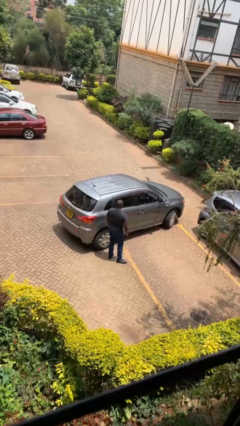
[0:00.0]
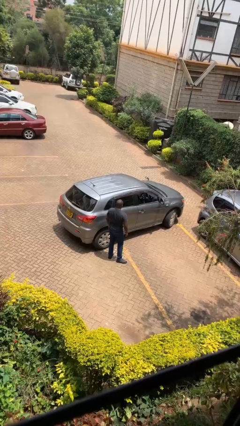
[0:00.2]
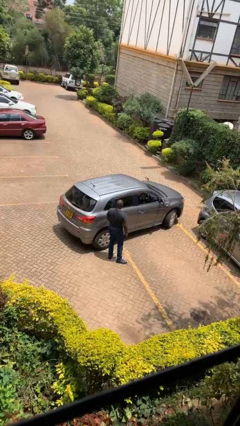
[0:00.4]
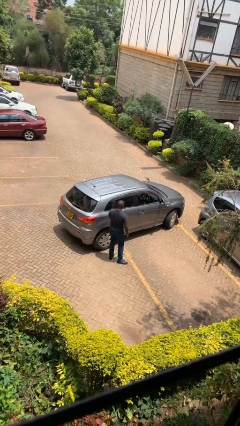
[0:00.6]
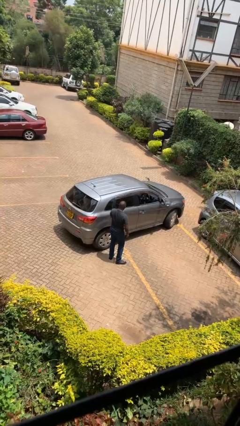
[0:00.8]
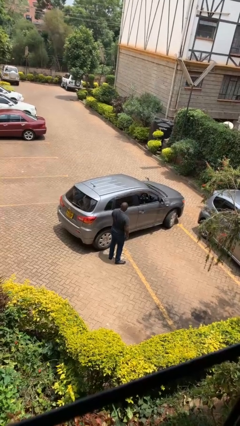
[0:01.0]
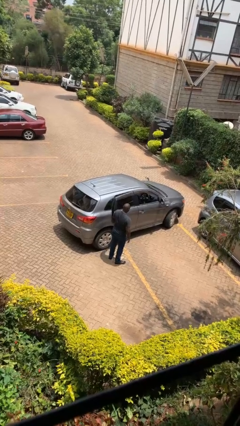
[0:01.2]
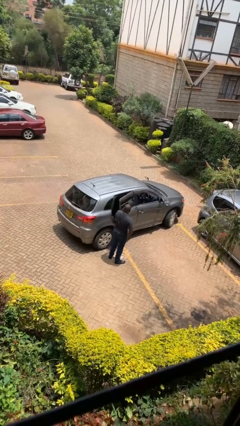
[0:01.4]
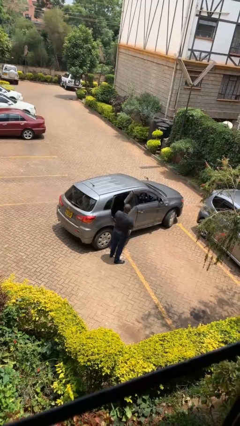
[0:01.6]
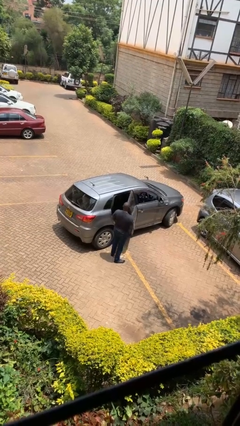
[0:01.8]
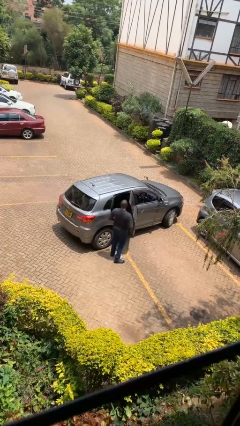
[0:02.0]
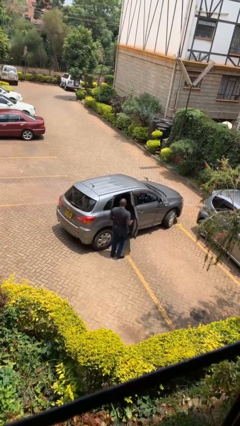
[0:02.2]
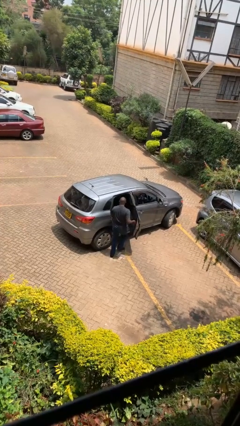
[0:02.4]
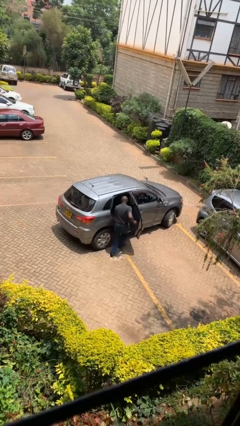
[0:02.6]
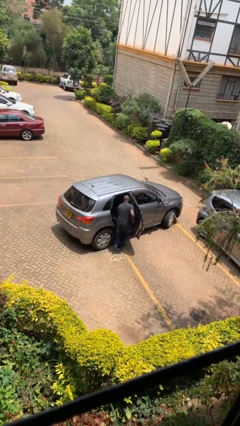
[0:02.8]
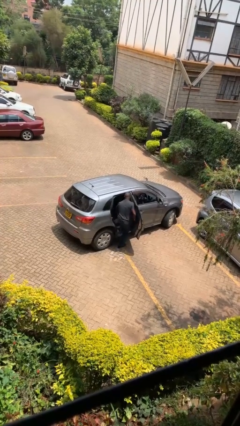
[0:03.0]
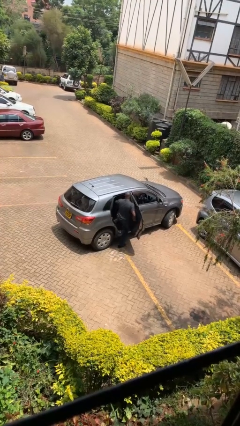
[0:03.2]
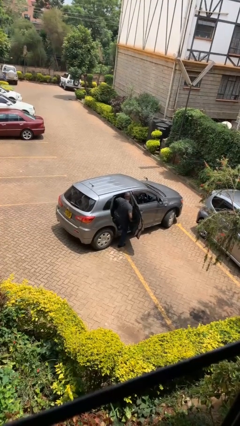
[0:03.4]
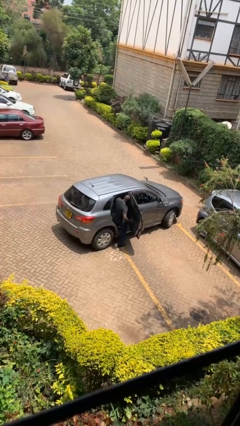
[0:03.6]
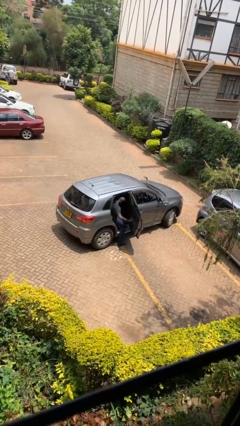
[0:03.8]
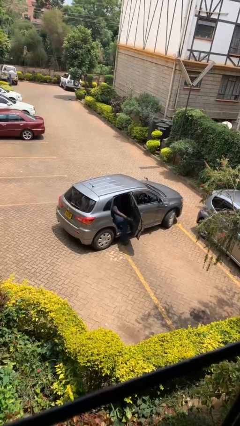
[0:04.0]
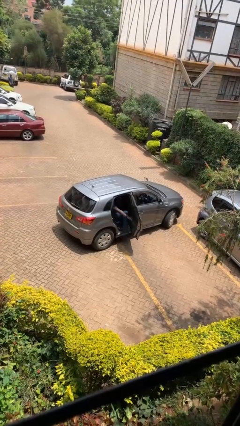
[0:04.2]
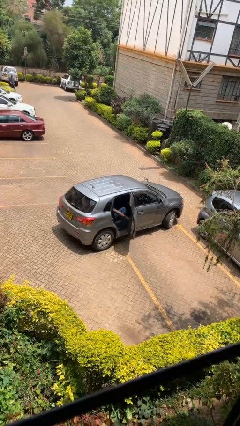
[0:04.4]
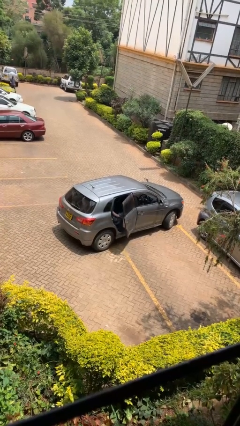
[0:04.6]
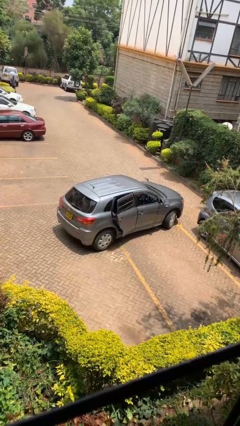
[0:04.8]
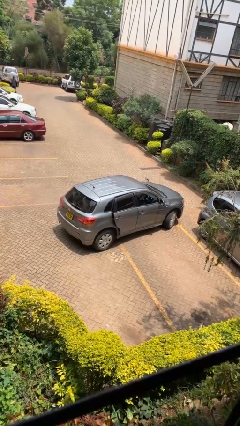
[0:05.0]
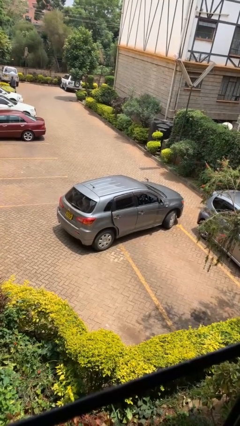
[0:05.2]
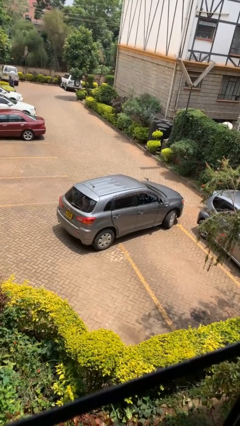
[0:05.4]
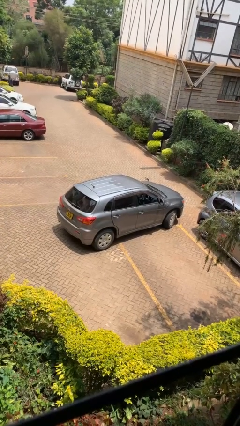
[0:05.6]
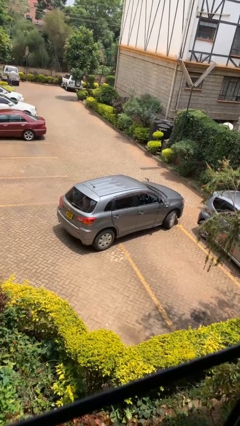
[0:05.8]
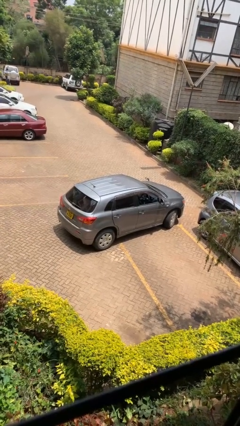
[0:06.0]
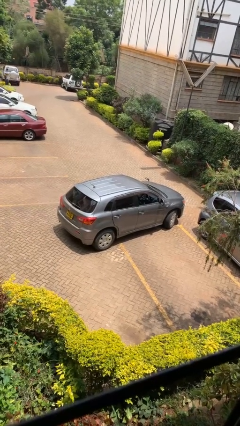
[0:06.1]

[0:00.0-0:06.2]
car picks up person

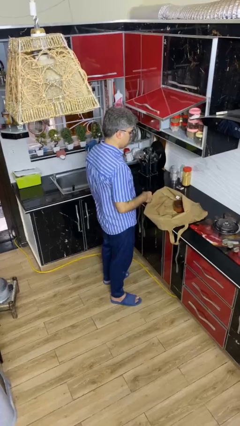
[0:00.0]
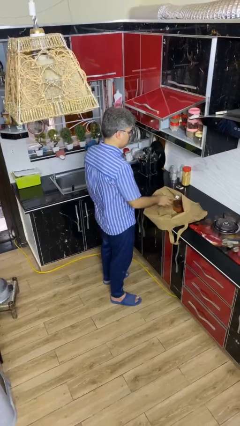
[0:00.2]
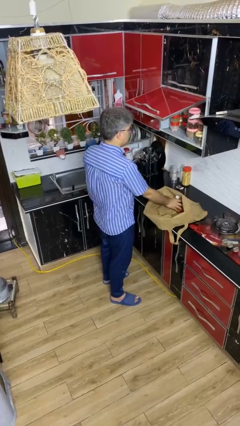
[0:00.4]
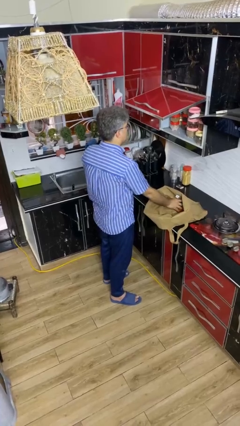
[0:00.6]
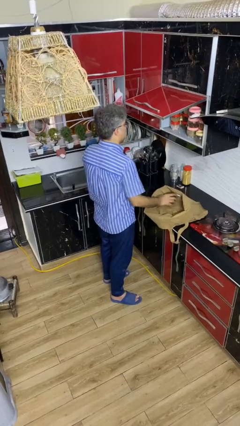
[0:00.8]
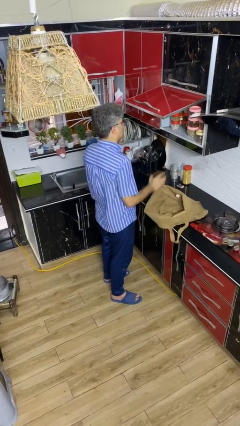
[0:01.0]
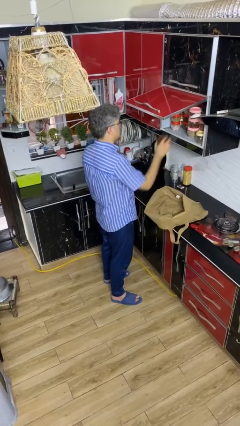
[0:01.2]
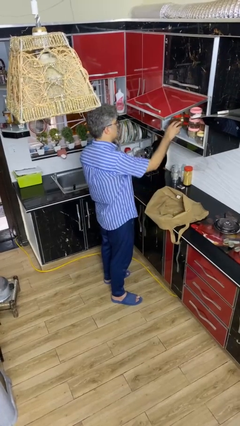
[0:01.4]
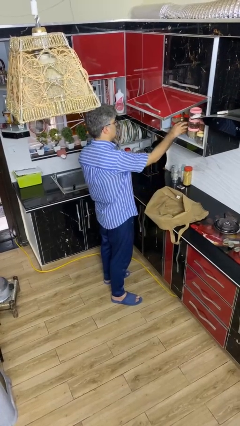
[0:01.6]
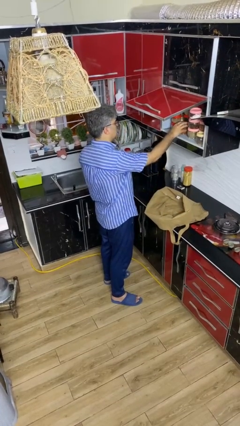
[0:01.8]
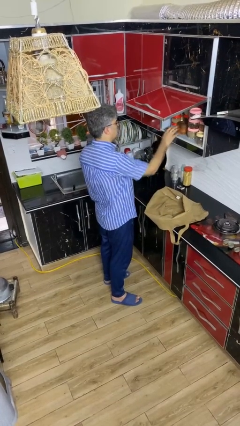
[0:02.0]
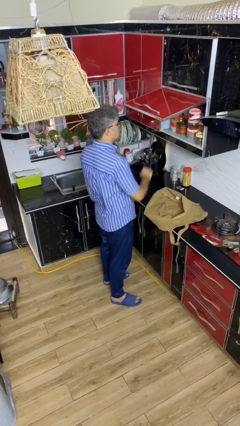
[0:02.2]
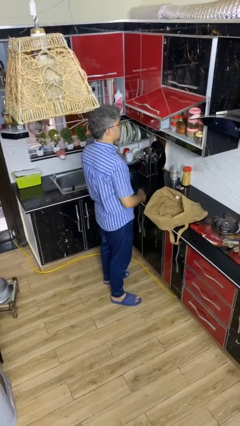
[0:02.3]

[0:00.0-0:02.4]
person loads groceries into cabinet

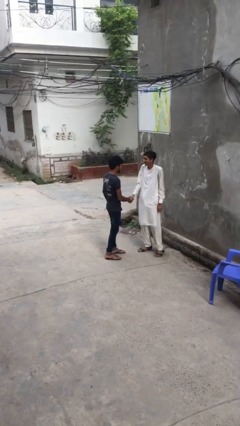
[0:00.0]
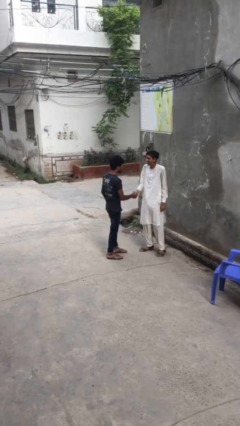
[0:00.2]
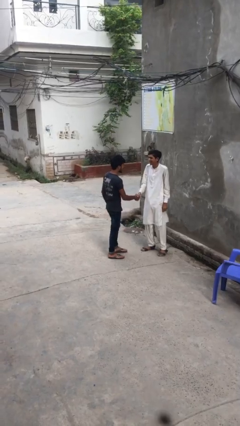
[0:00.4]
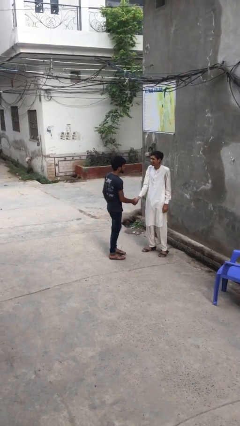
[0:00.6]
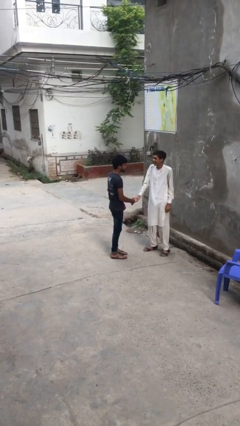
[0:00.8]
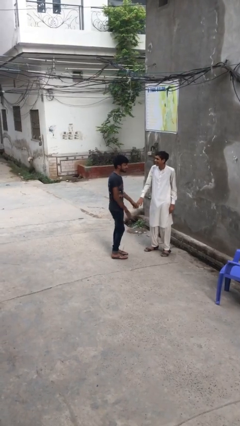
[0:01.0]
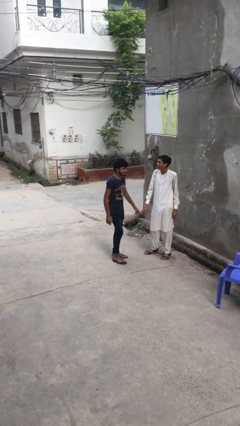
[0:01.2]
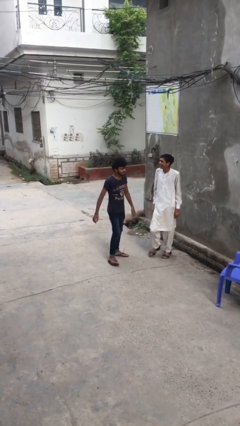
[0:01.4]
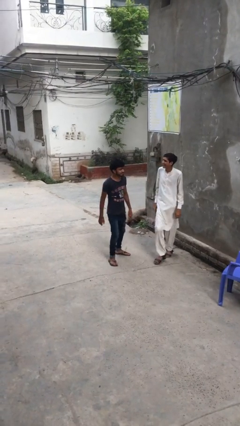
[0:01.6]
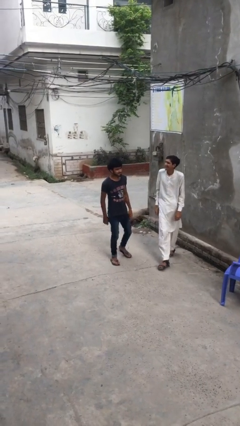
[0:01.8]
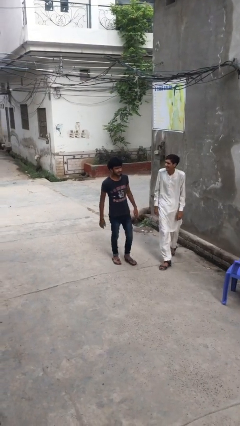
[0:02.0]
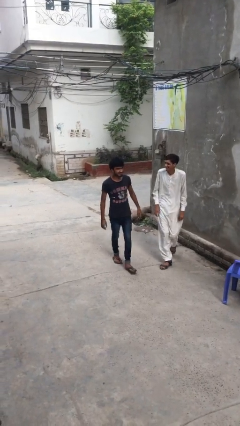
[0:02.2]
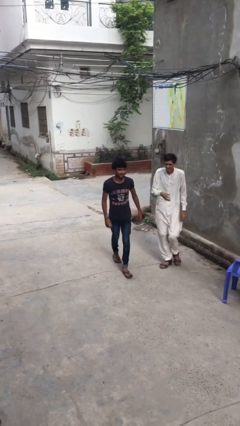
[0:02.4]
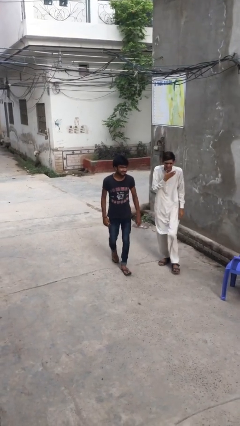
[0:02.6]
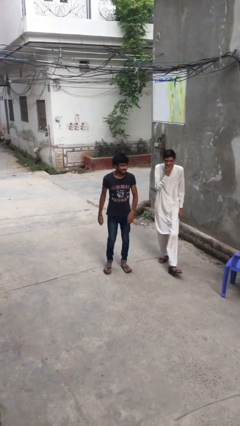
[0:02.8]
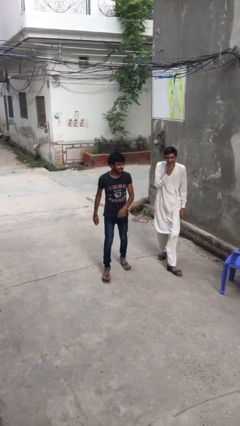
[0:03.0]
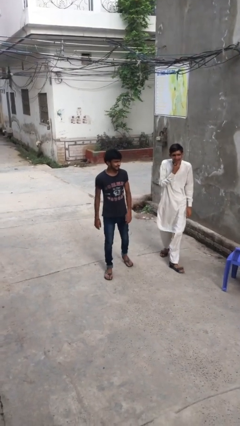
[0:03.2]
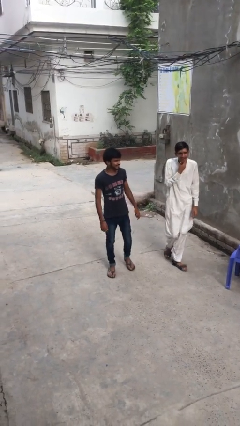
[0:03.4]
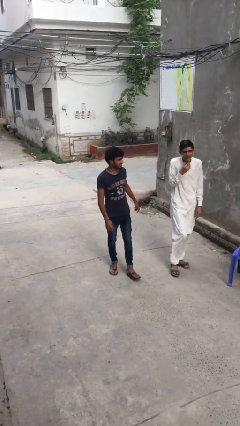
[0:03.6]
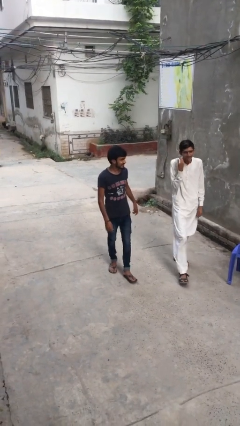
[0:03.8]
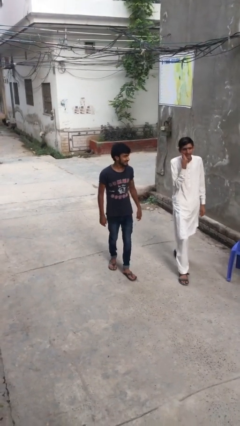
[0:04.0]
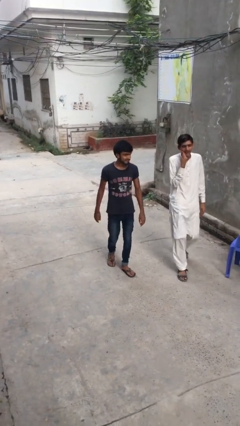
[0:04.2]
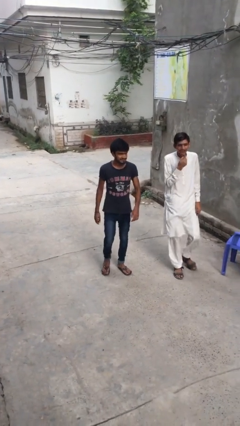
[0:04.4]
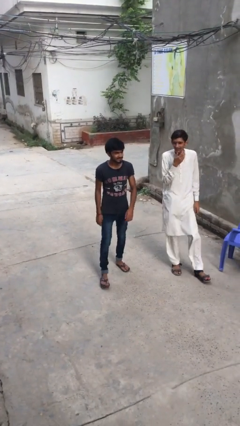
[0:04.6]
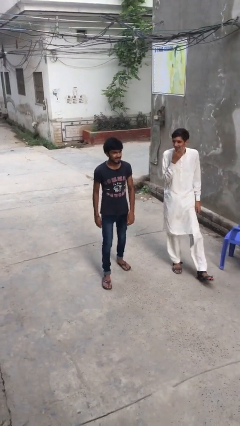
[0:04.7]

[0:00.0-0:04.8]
person talks to person

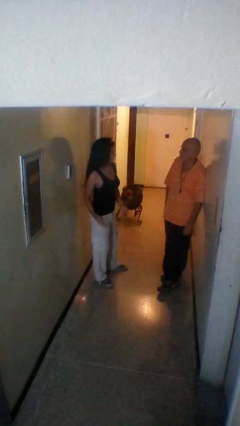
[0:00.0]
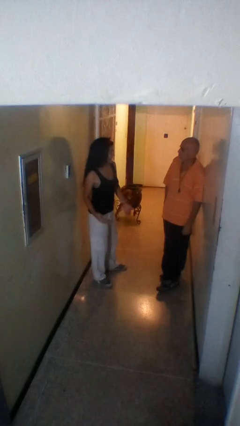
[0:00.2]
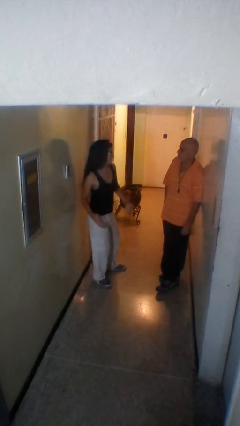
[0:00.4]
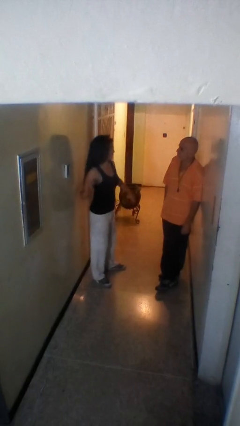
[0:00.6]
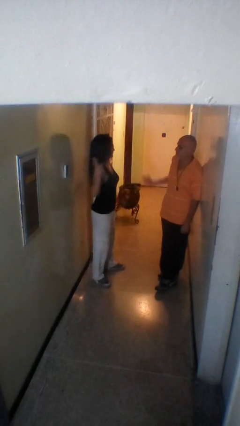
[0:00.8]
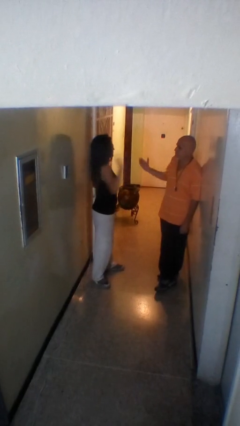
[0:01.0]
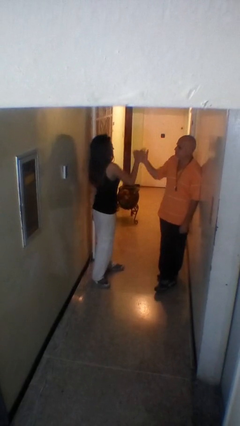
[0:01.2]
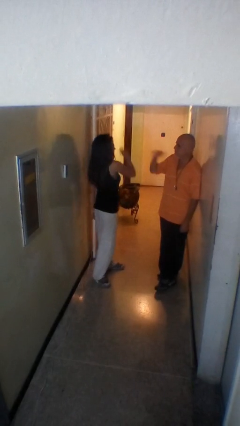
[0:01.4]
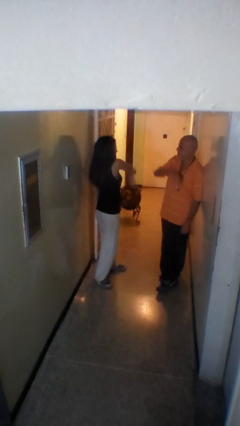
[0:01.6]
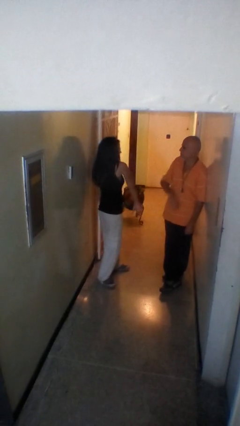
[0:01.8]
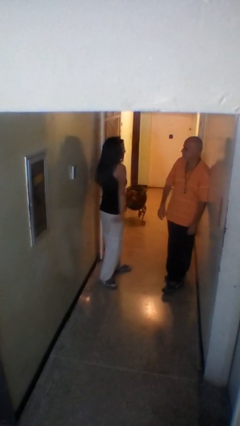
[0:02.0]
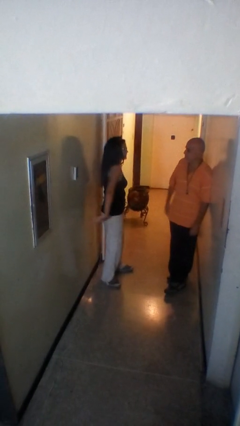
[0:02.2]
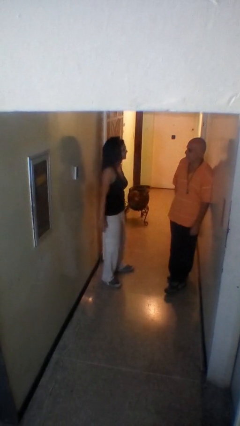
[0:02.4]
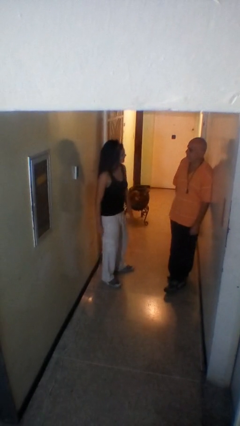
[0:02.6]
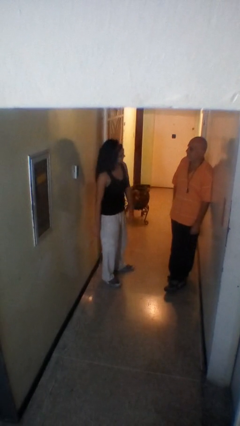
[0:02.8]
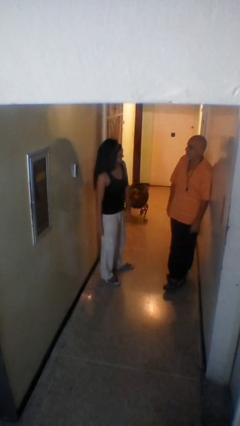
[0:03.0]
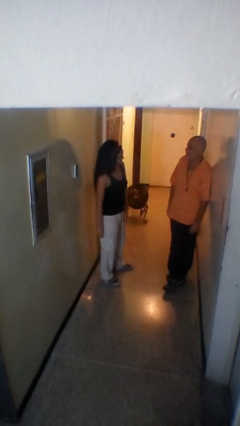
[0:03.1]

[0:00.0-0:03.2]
person highfives hand

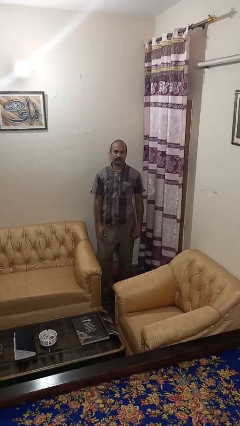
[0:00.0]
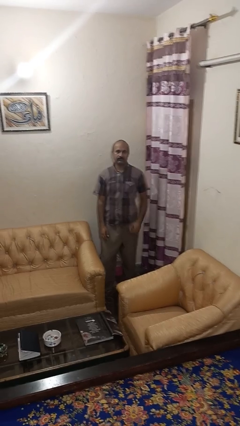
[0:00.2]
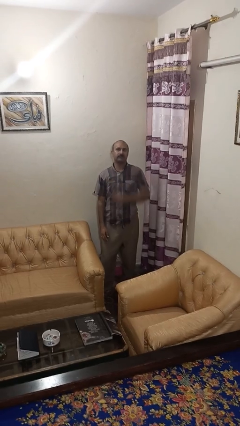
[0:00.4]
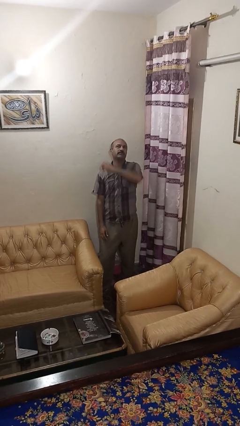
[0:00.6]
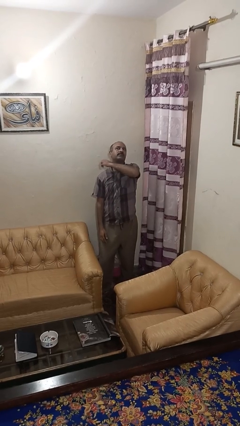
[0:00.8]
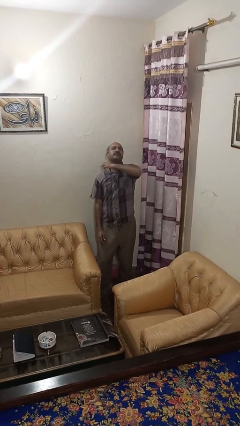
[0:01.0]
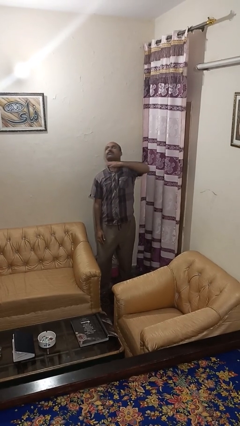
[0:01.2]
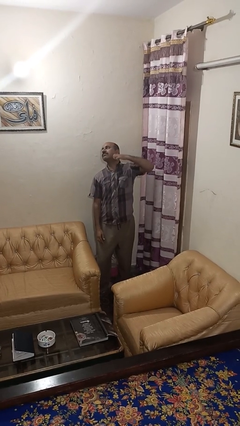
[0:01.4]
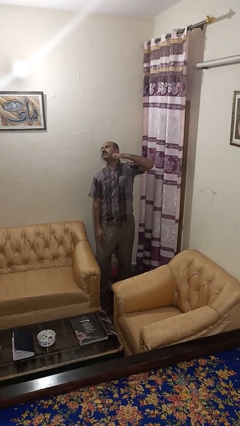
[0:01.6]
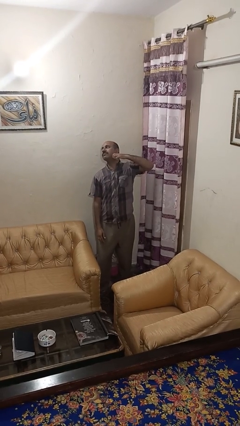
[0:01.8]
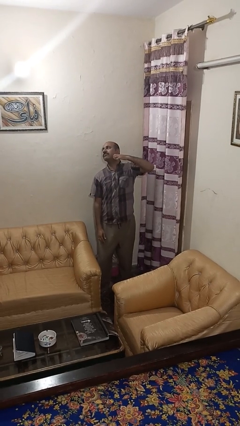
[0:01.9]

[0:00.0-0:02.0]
person gestures cut
